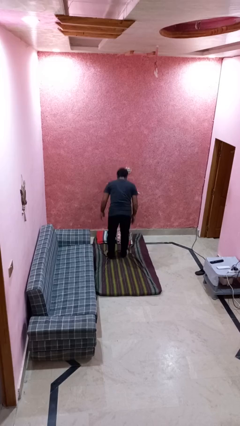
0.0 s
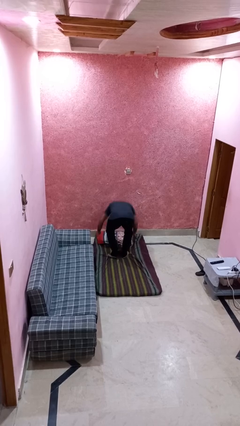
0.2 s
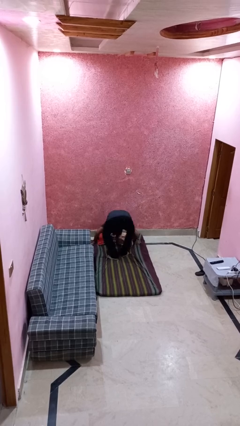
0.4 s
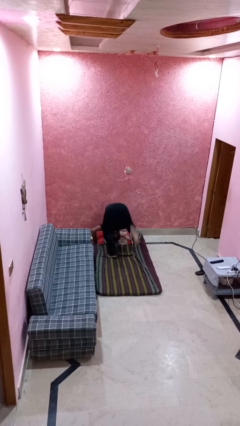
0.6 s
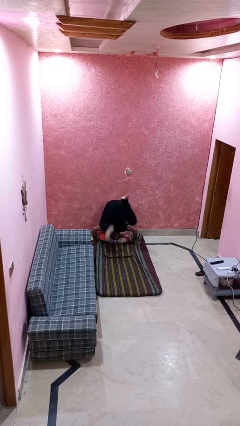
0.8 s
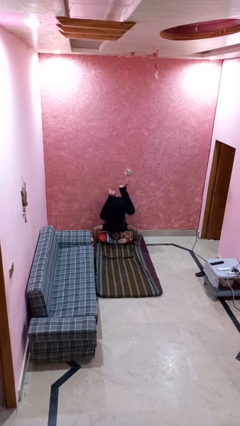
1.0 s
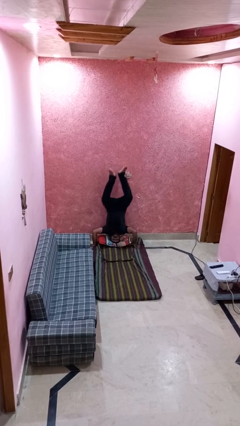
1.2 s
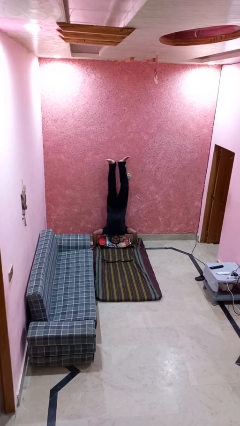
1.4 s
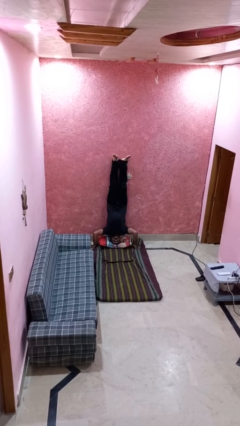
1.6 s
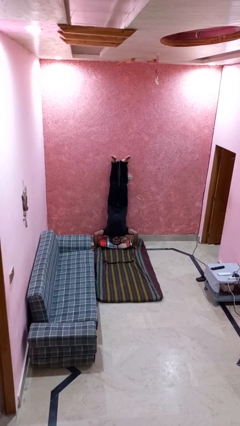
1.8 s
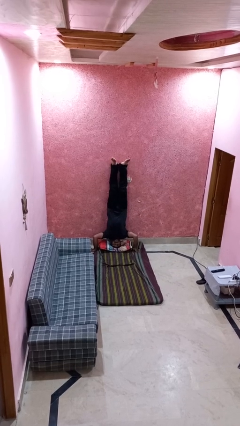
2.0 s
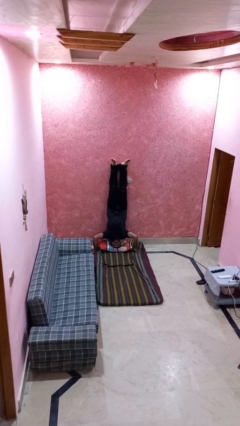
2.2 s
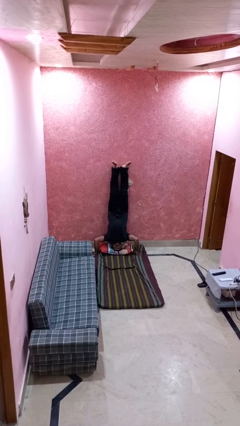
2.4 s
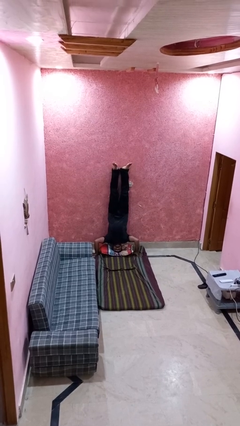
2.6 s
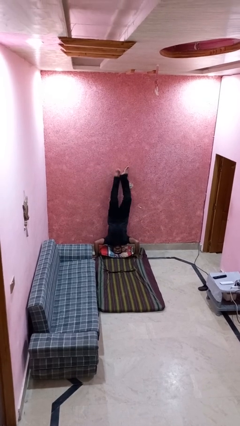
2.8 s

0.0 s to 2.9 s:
person handstand

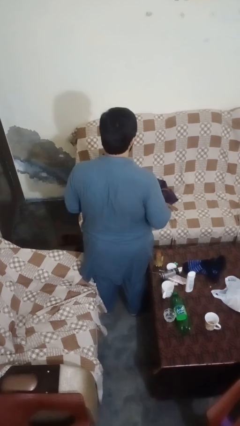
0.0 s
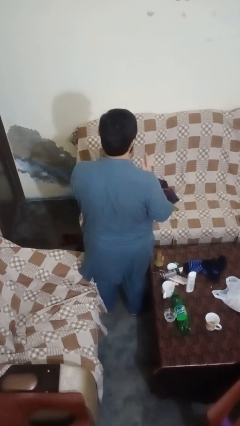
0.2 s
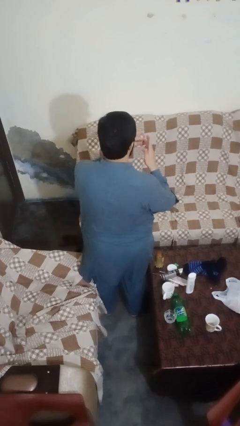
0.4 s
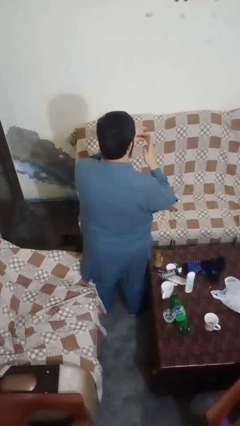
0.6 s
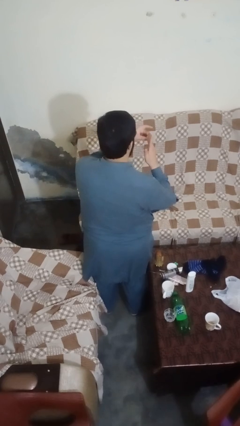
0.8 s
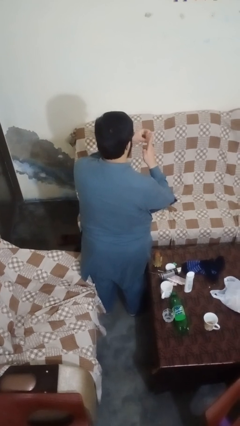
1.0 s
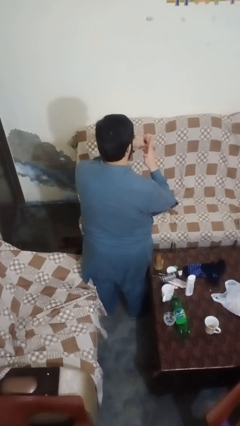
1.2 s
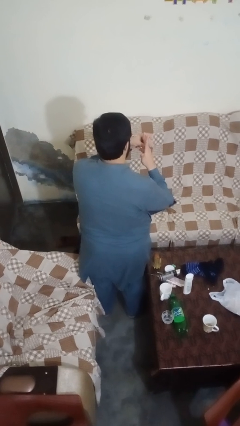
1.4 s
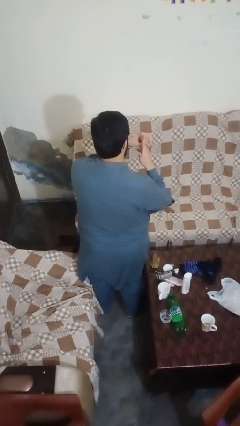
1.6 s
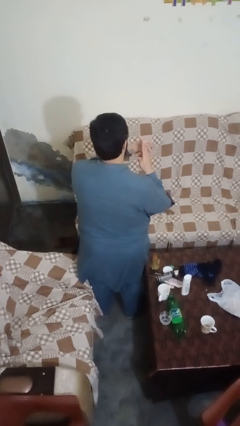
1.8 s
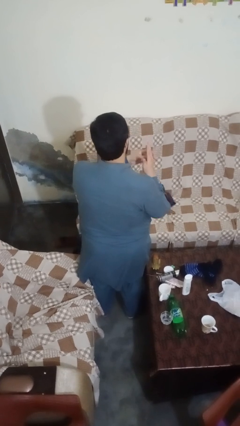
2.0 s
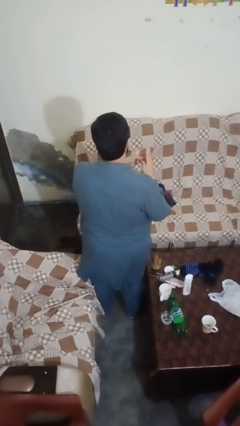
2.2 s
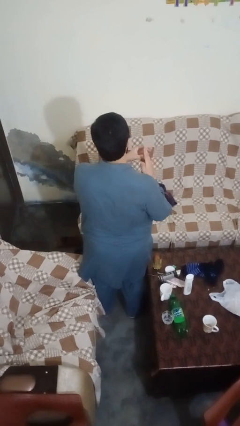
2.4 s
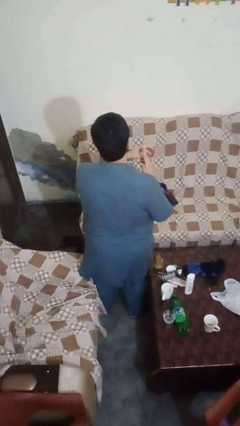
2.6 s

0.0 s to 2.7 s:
person puts on ring

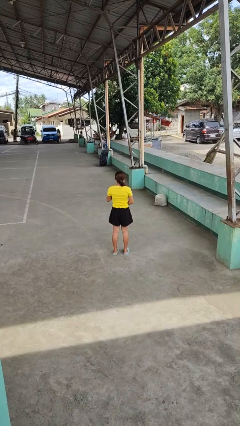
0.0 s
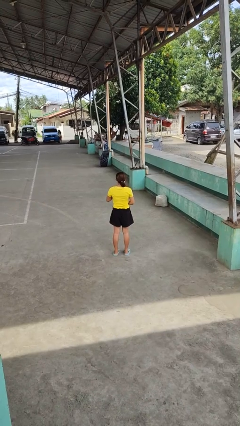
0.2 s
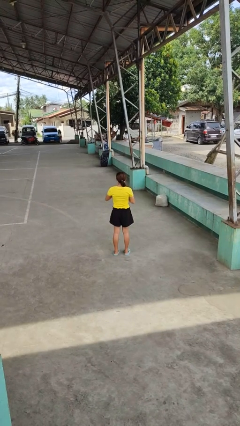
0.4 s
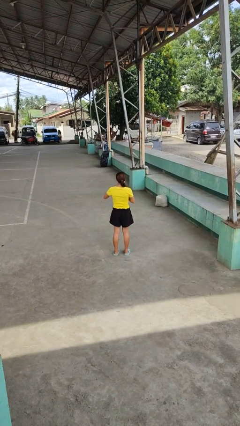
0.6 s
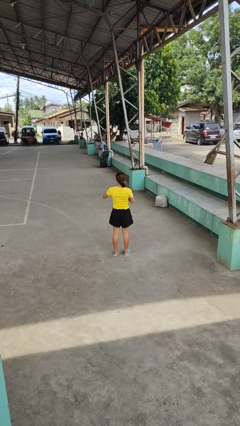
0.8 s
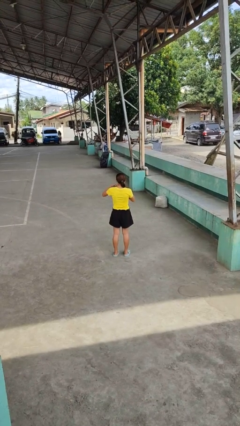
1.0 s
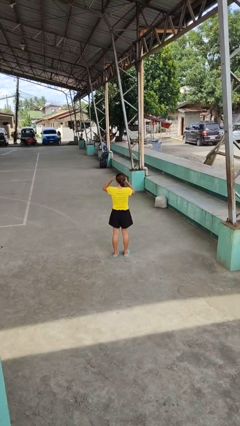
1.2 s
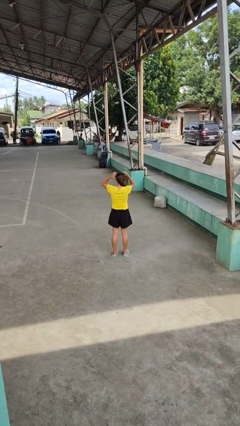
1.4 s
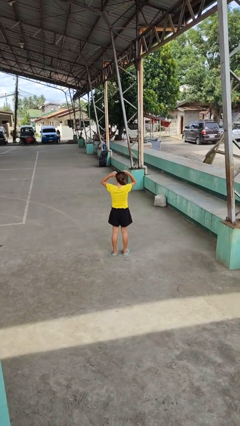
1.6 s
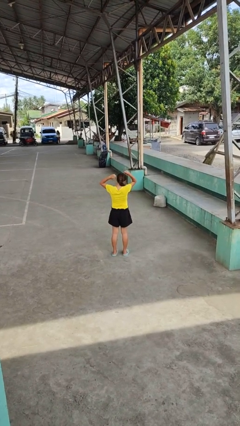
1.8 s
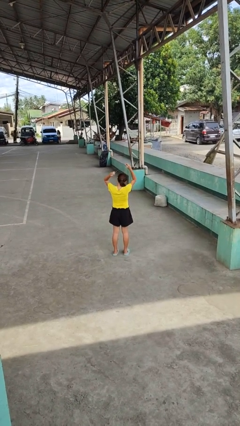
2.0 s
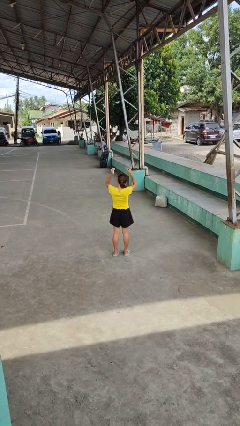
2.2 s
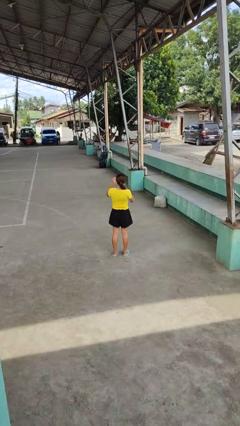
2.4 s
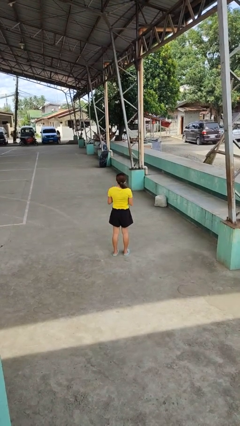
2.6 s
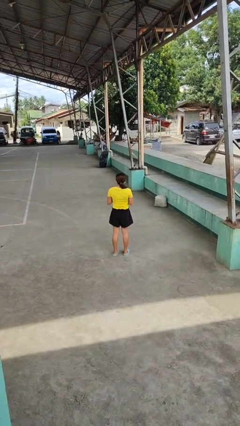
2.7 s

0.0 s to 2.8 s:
person takes off necklace

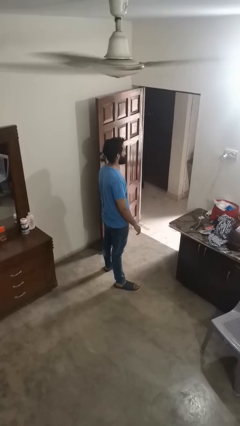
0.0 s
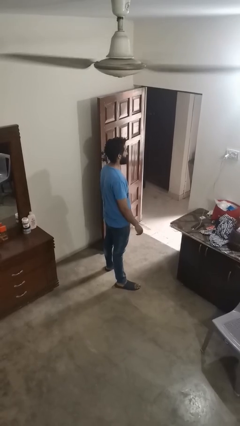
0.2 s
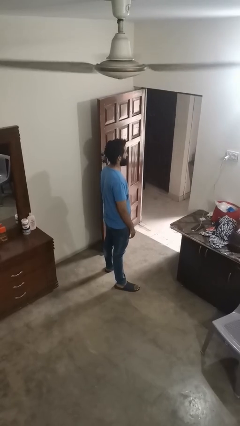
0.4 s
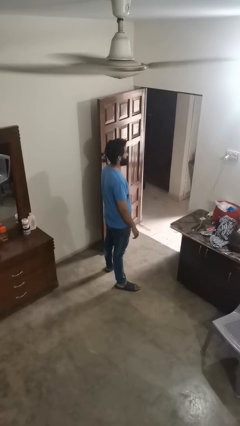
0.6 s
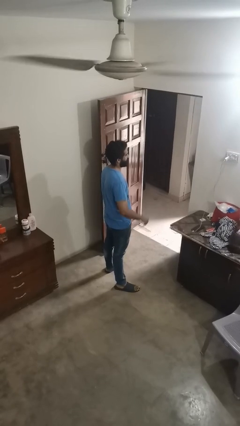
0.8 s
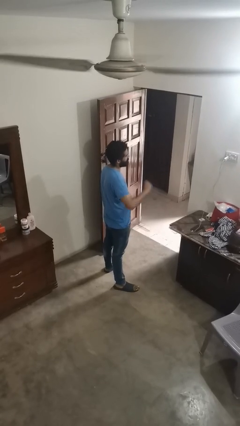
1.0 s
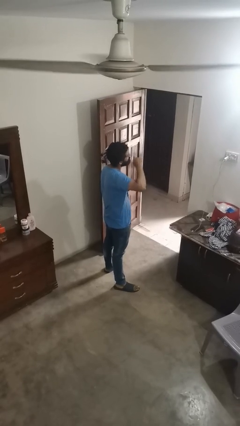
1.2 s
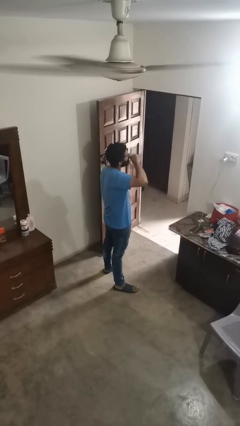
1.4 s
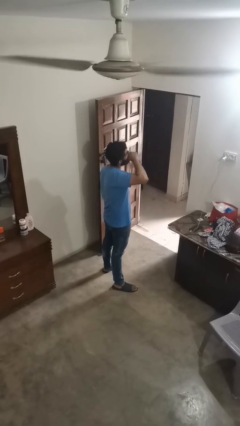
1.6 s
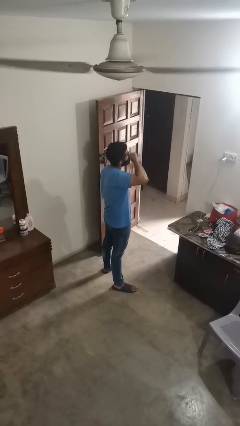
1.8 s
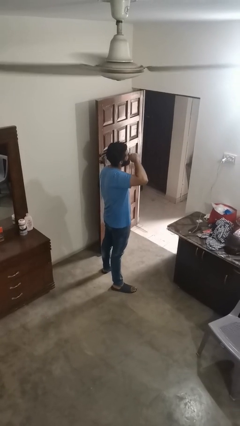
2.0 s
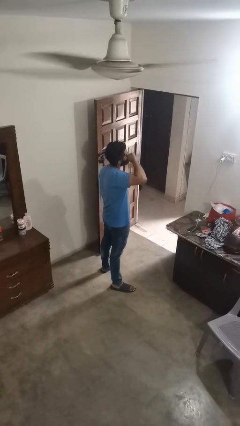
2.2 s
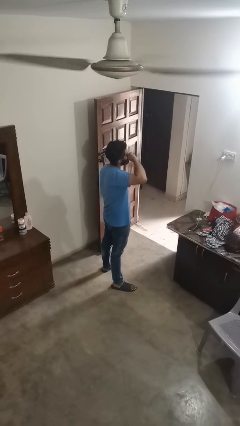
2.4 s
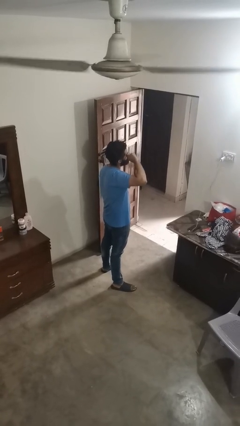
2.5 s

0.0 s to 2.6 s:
person rubs eyes

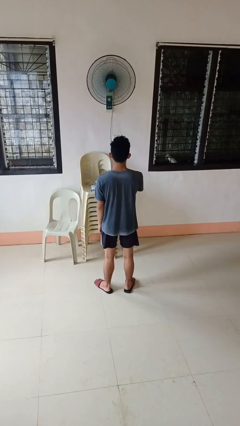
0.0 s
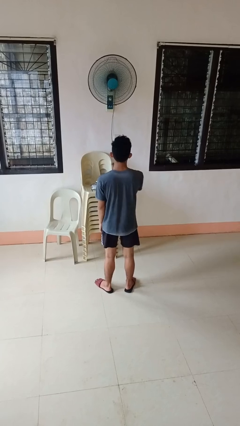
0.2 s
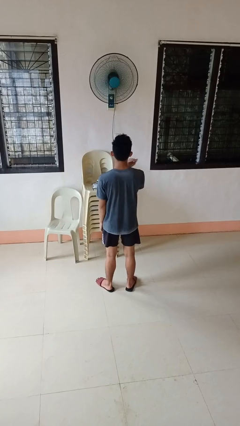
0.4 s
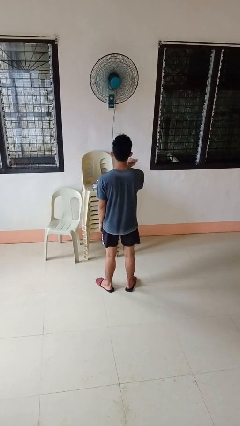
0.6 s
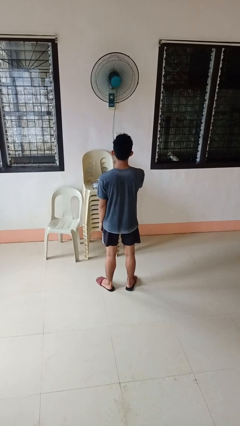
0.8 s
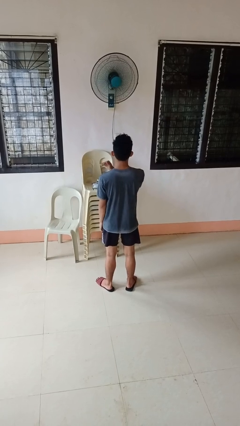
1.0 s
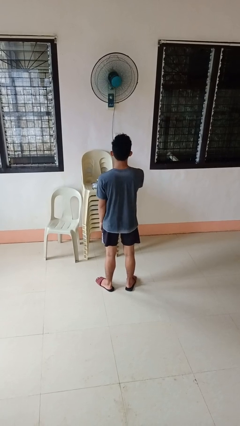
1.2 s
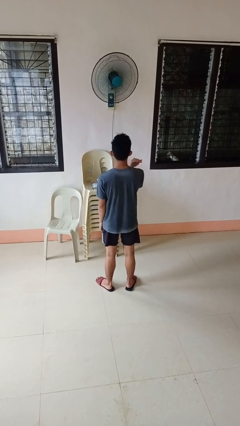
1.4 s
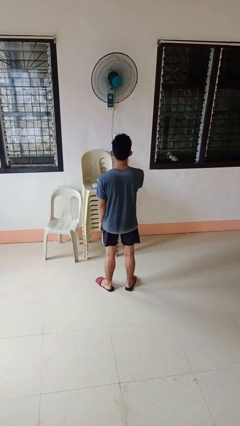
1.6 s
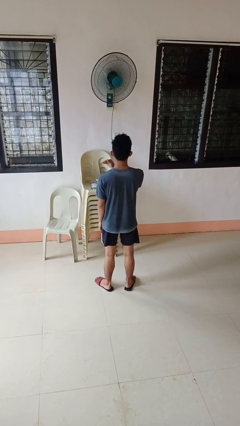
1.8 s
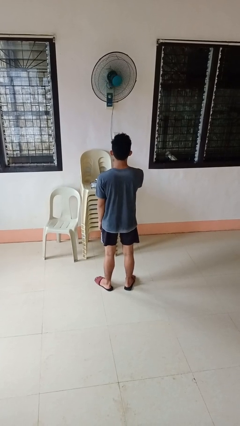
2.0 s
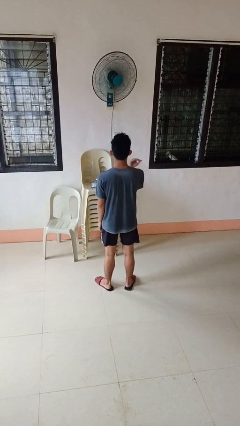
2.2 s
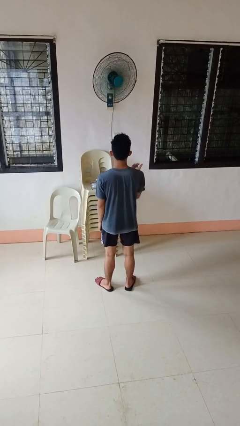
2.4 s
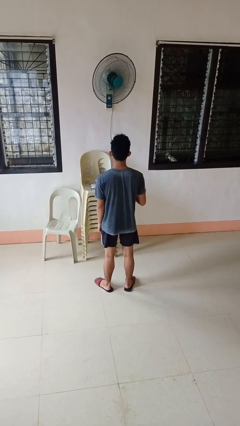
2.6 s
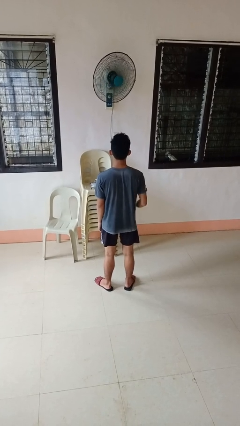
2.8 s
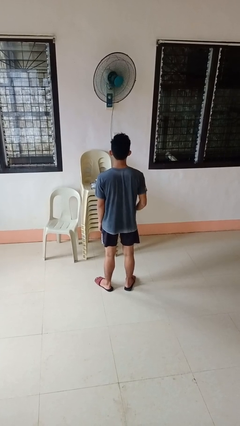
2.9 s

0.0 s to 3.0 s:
person gestures cut

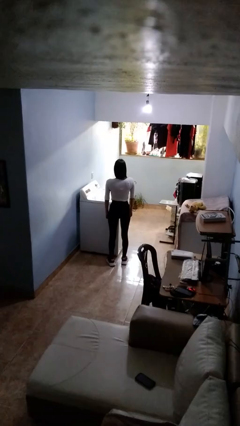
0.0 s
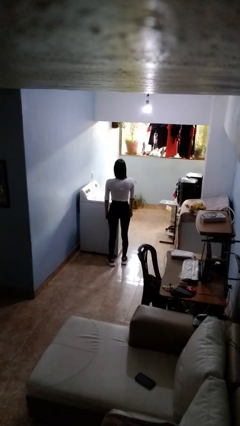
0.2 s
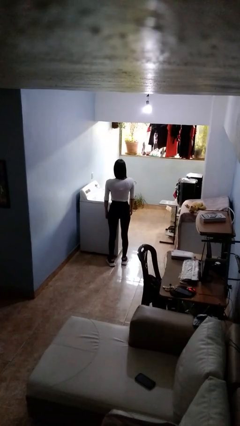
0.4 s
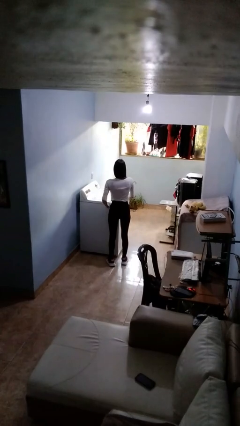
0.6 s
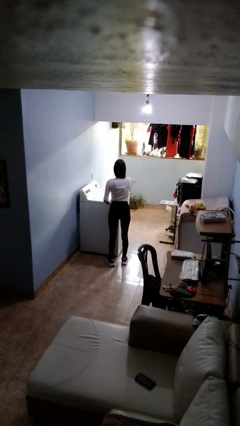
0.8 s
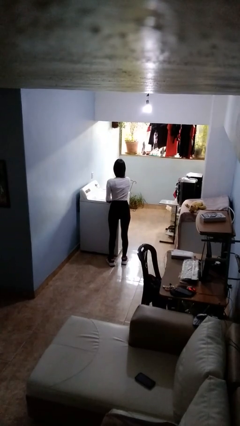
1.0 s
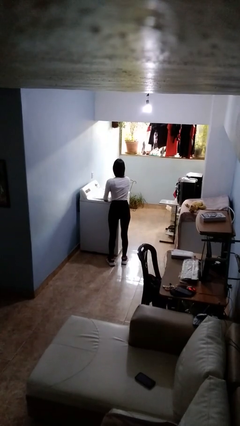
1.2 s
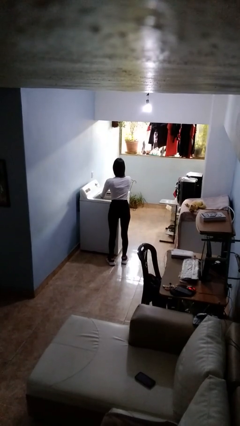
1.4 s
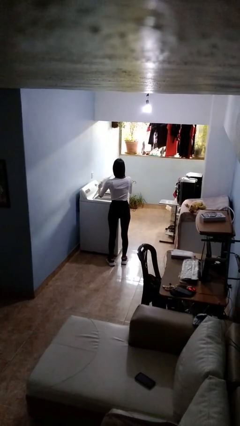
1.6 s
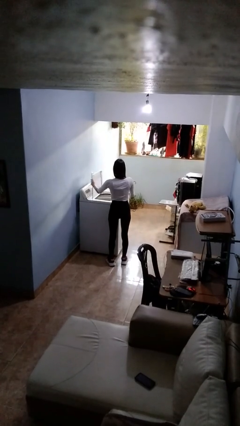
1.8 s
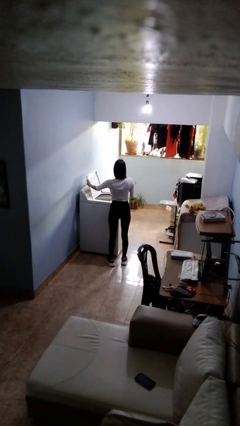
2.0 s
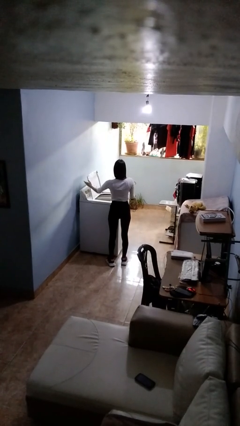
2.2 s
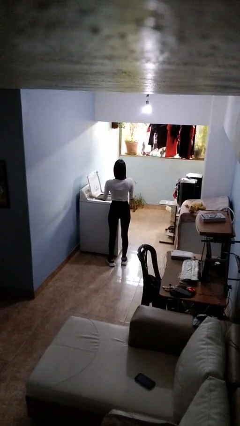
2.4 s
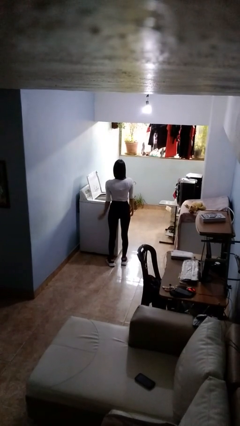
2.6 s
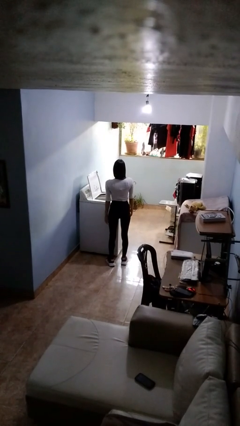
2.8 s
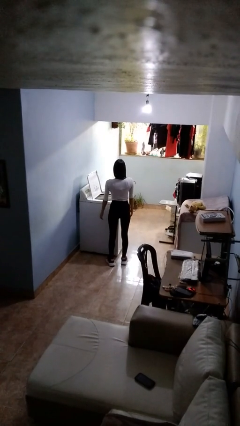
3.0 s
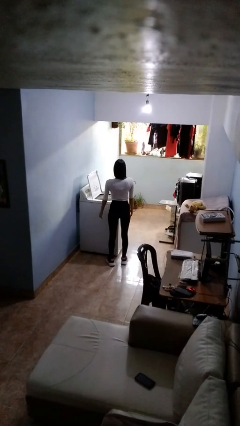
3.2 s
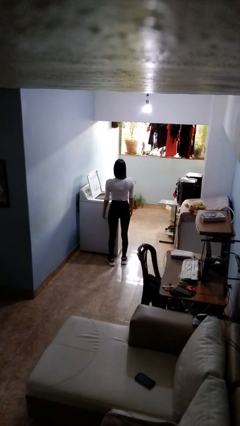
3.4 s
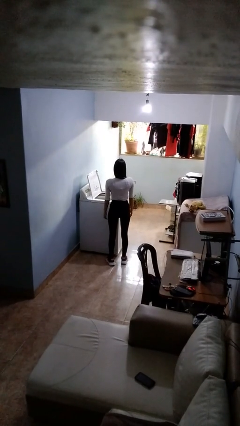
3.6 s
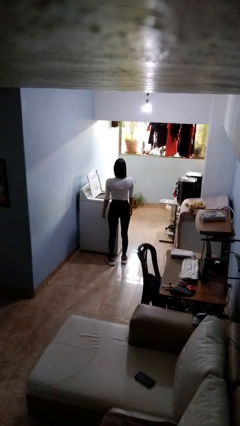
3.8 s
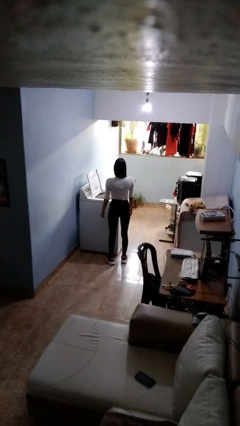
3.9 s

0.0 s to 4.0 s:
person opens clothes washer
